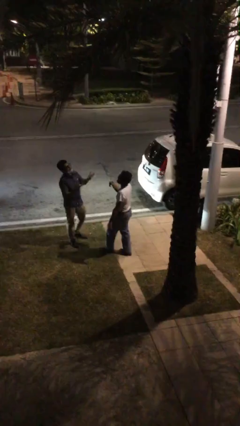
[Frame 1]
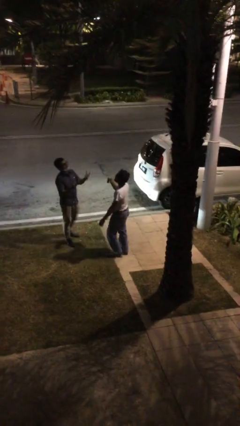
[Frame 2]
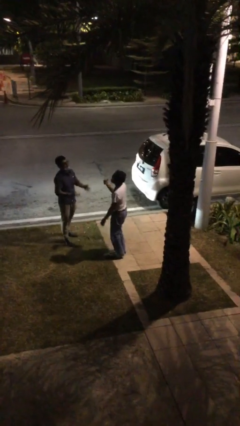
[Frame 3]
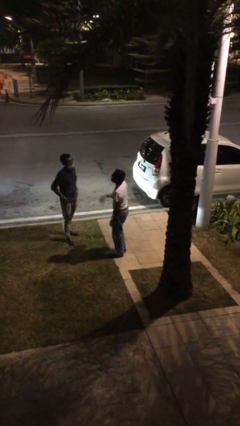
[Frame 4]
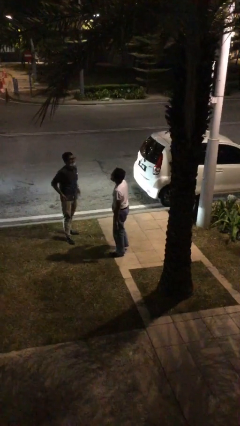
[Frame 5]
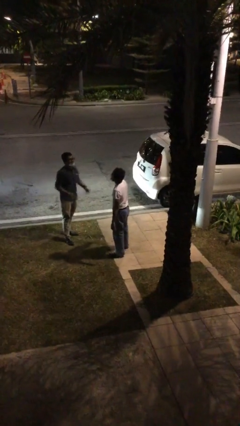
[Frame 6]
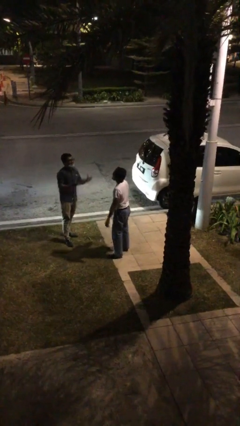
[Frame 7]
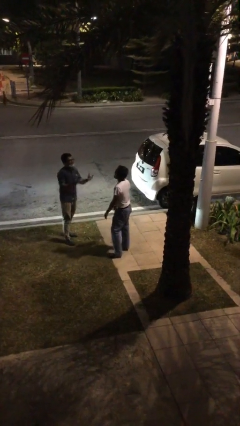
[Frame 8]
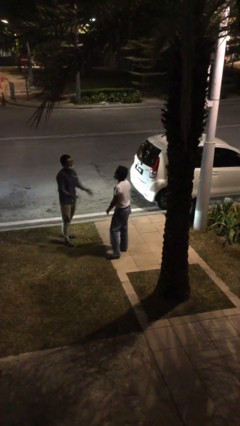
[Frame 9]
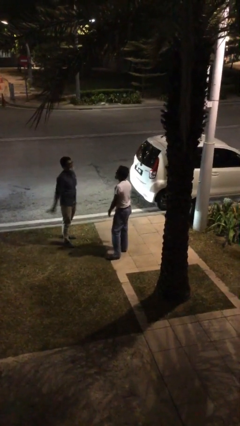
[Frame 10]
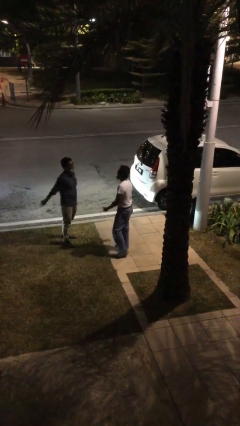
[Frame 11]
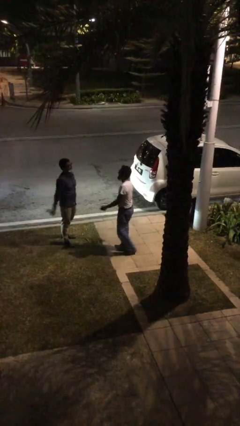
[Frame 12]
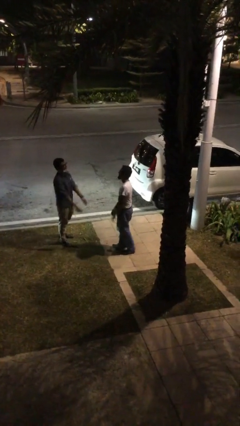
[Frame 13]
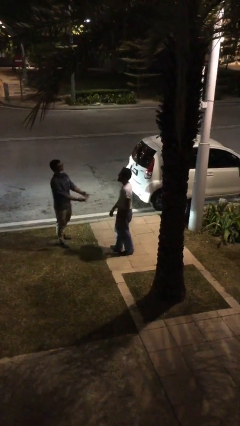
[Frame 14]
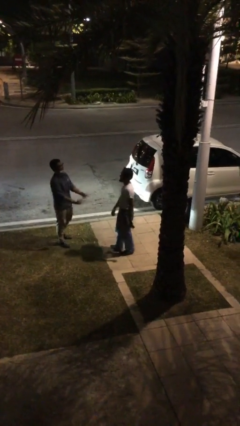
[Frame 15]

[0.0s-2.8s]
person talks to person

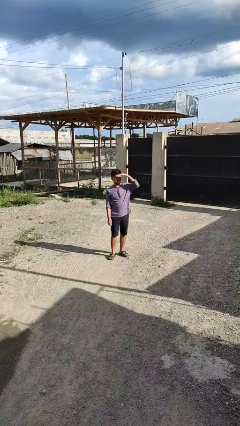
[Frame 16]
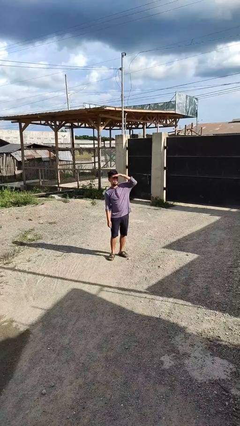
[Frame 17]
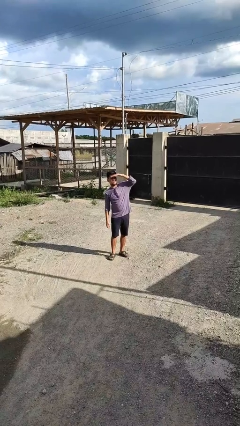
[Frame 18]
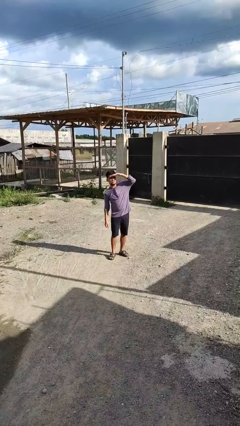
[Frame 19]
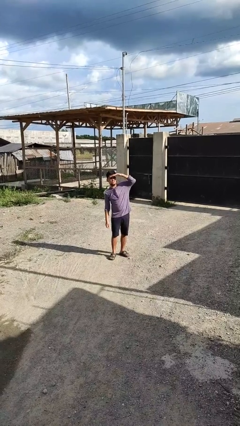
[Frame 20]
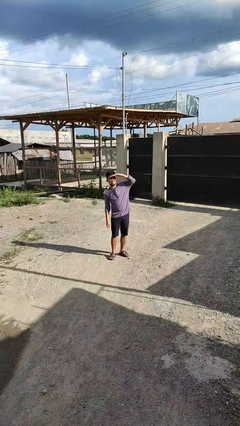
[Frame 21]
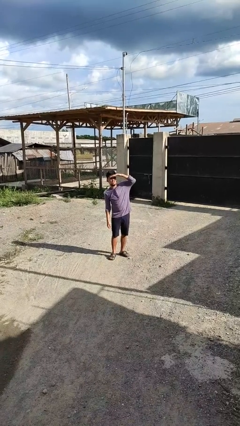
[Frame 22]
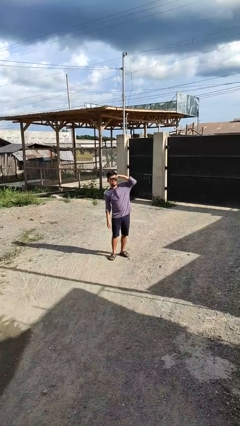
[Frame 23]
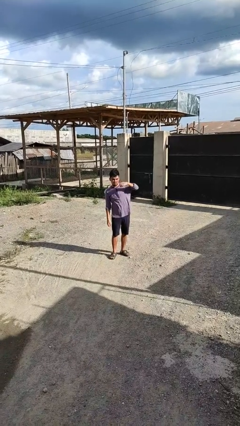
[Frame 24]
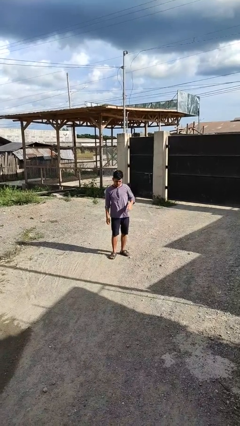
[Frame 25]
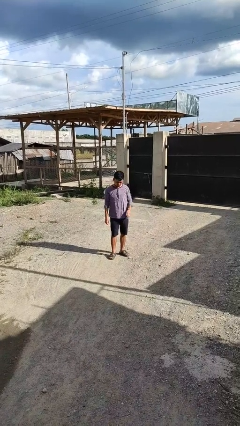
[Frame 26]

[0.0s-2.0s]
person shades eyes

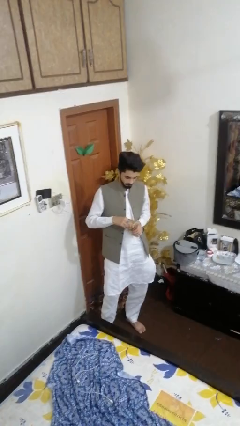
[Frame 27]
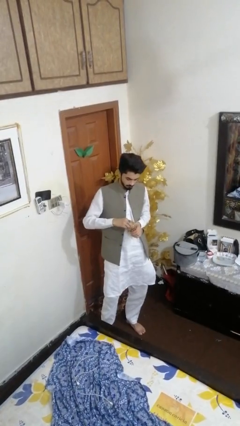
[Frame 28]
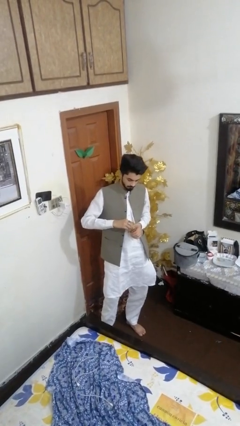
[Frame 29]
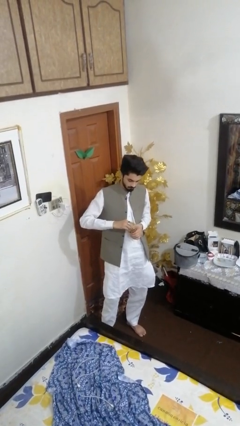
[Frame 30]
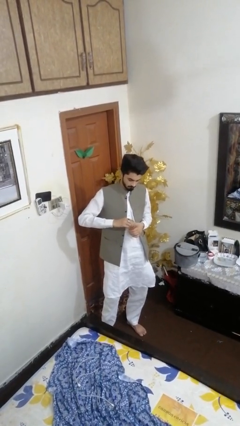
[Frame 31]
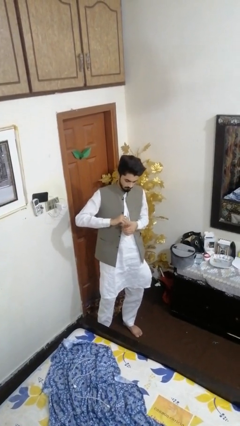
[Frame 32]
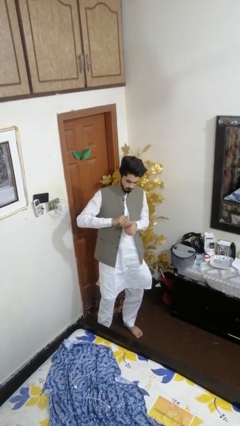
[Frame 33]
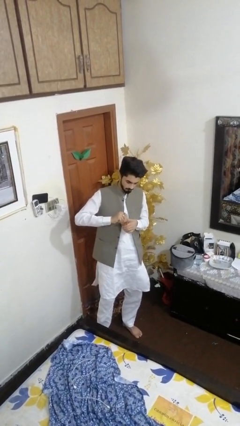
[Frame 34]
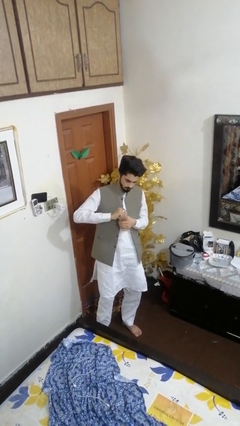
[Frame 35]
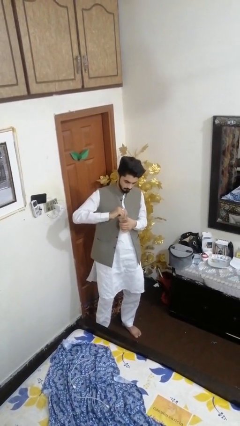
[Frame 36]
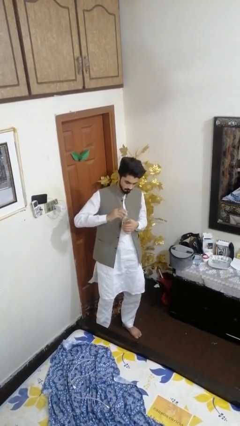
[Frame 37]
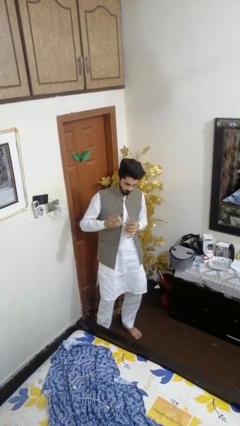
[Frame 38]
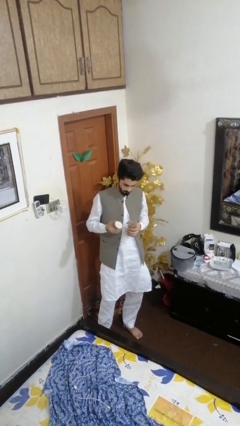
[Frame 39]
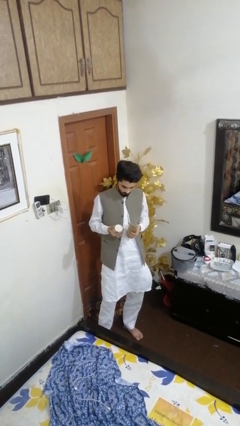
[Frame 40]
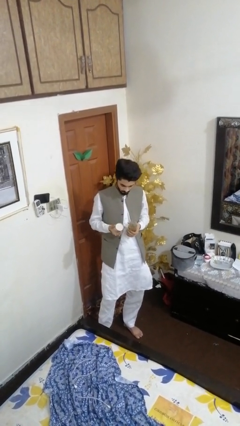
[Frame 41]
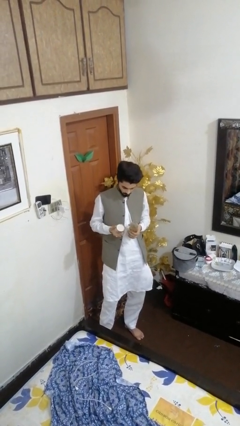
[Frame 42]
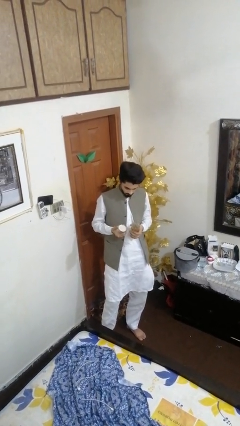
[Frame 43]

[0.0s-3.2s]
person opens jar

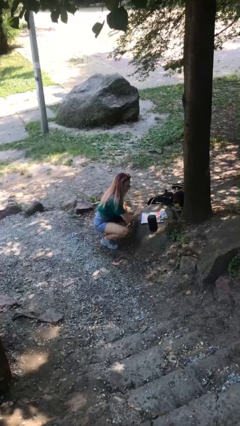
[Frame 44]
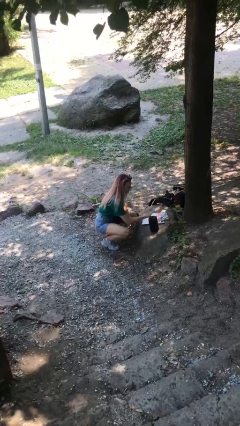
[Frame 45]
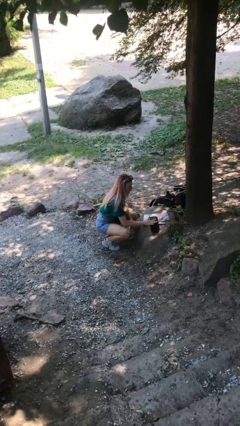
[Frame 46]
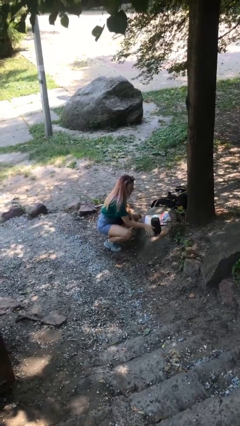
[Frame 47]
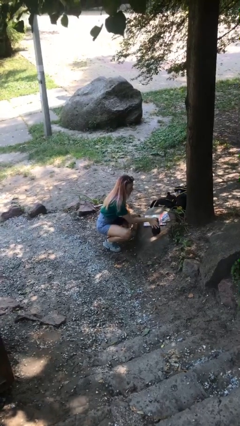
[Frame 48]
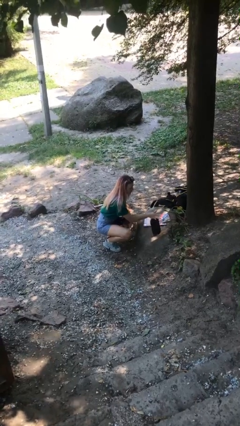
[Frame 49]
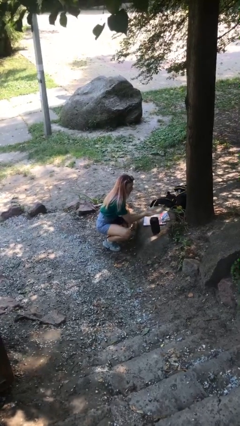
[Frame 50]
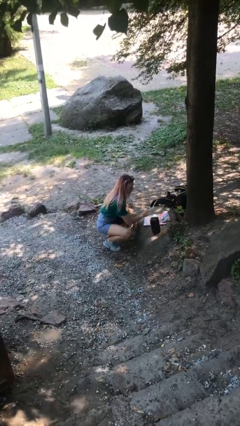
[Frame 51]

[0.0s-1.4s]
person waves hand over object

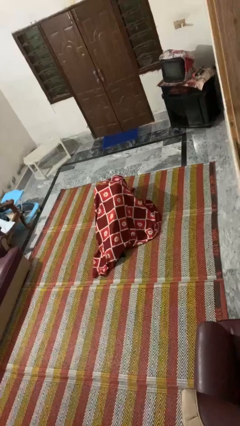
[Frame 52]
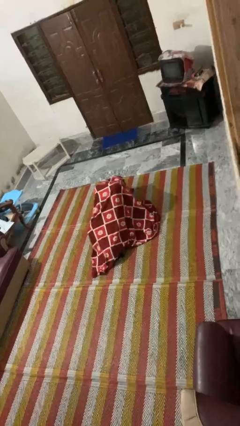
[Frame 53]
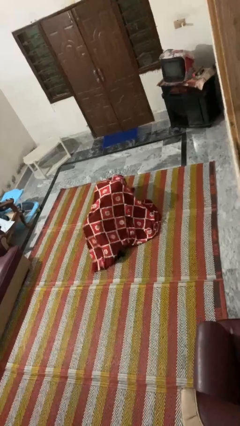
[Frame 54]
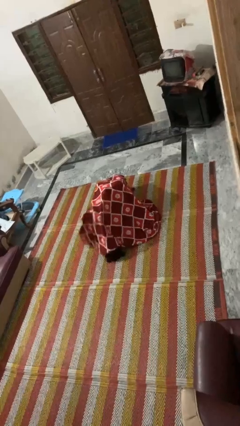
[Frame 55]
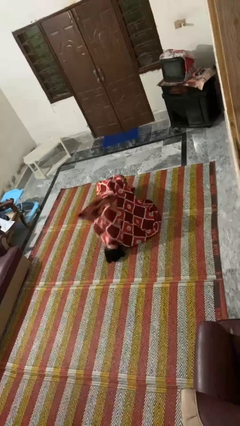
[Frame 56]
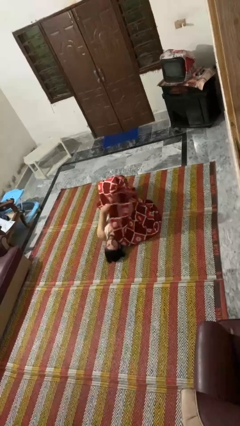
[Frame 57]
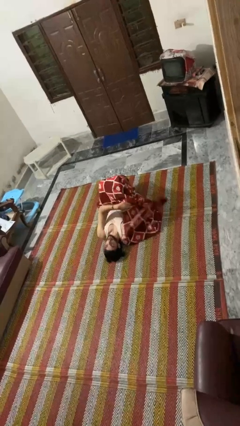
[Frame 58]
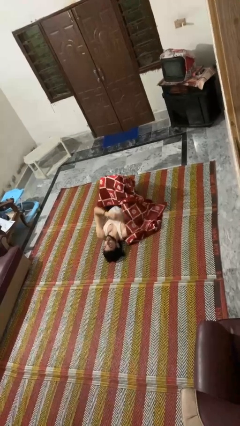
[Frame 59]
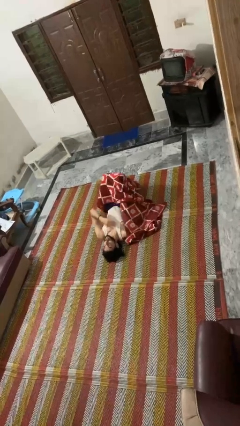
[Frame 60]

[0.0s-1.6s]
person uncovers with blanket

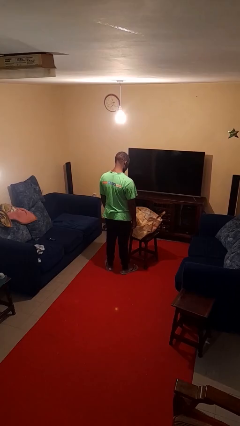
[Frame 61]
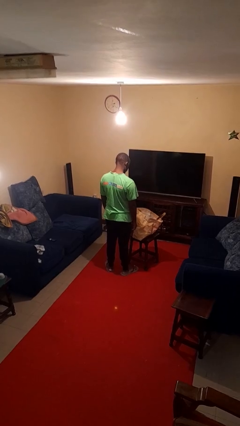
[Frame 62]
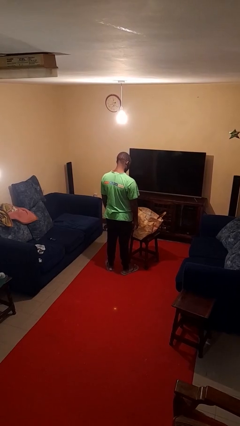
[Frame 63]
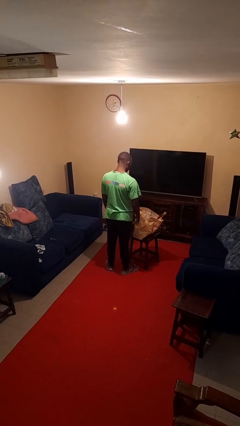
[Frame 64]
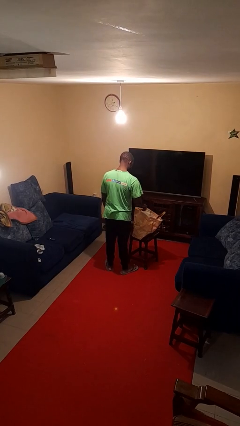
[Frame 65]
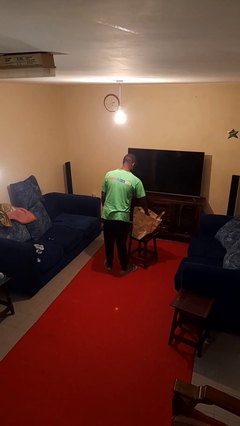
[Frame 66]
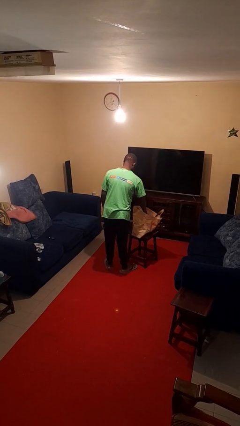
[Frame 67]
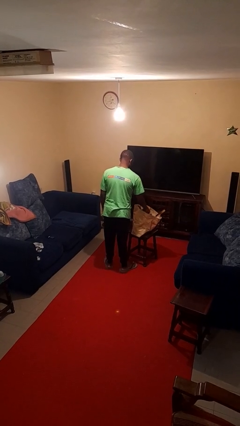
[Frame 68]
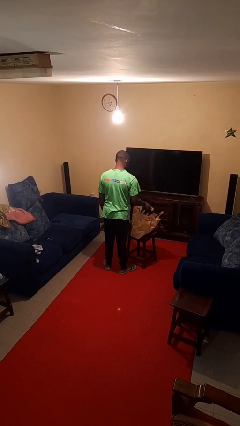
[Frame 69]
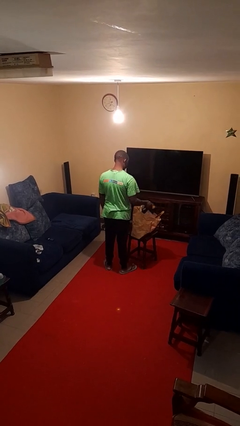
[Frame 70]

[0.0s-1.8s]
person takes object from bag

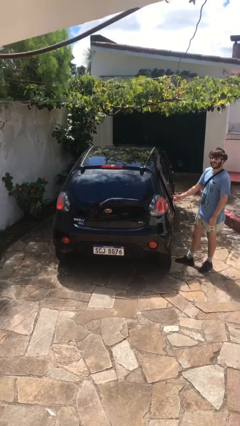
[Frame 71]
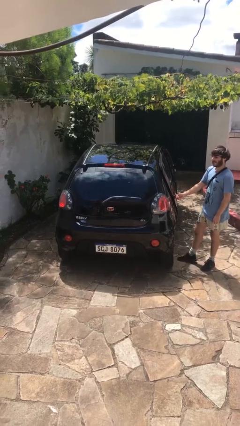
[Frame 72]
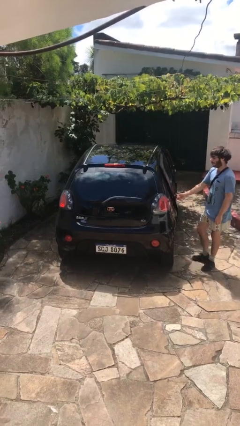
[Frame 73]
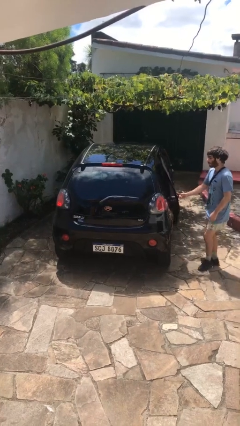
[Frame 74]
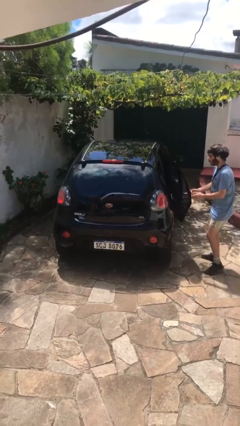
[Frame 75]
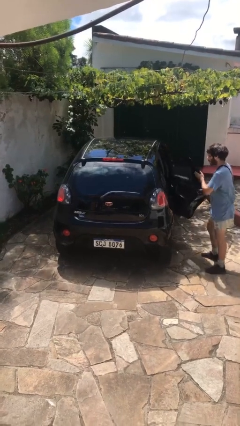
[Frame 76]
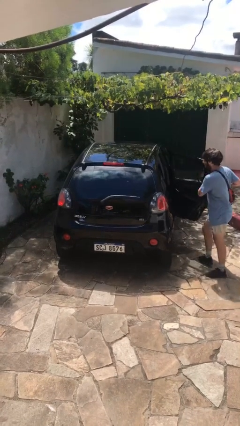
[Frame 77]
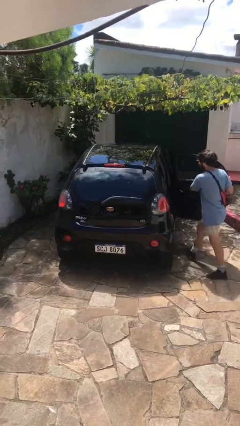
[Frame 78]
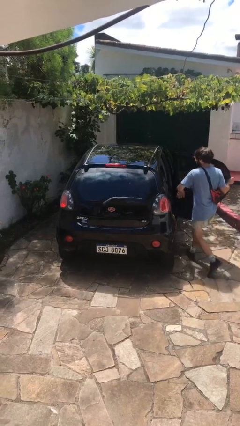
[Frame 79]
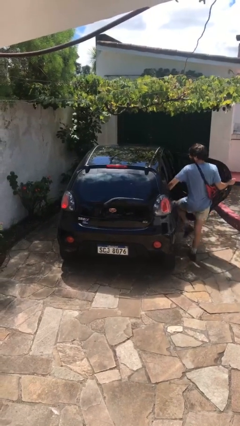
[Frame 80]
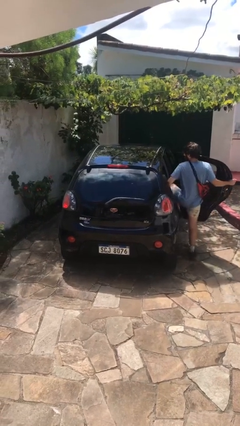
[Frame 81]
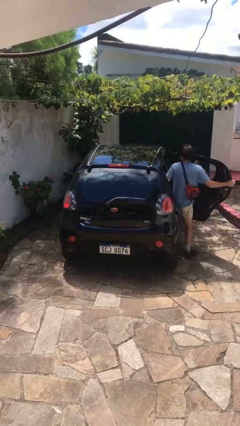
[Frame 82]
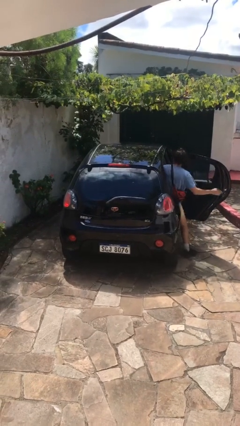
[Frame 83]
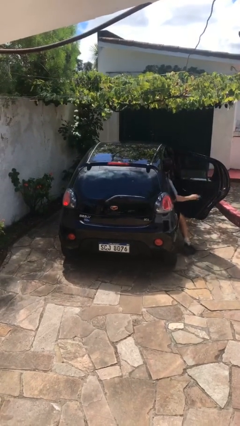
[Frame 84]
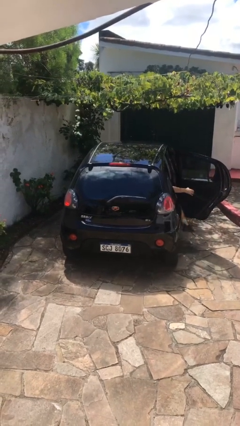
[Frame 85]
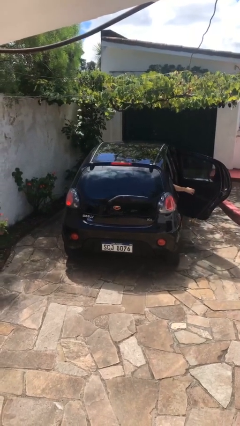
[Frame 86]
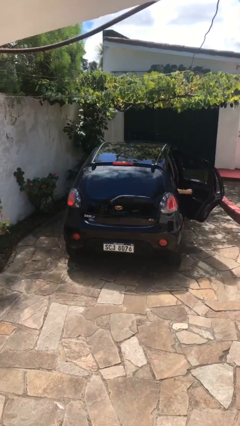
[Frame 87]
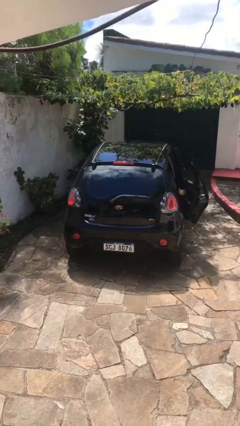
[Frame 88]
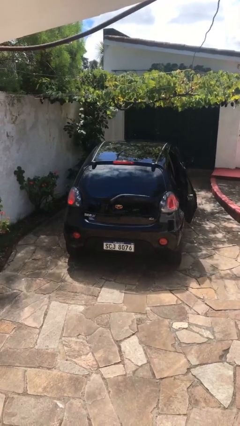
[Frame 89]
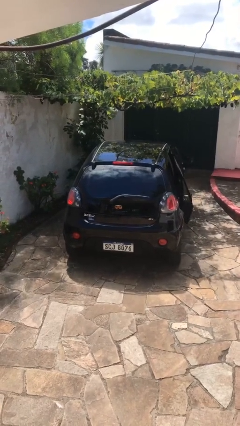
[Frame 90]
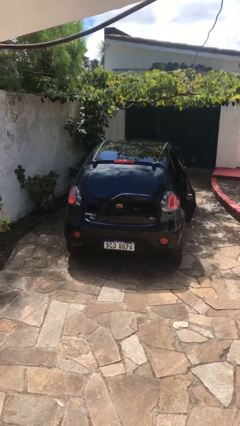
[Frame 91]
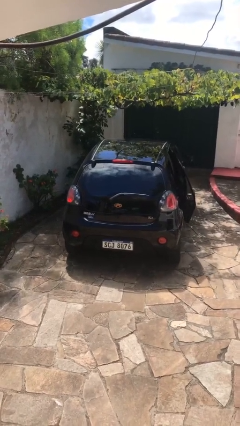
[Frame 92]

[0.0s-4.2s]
car picks up person
